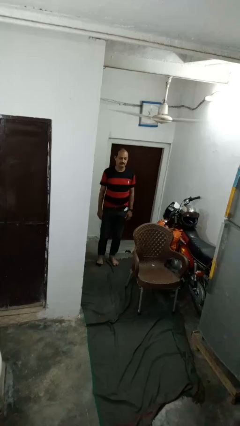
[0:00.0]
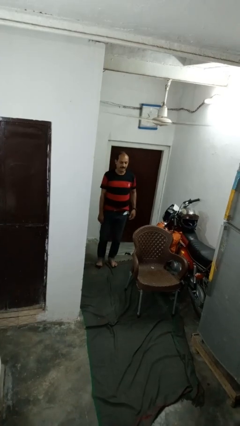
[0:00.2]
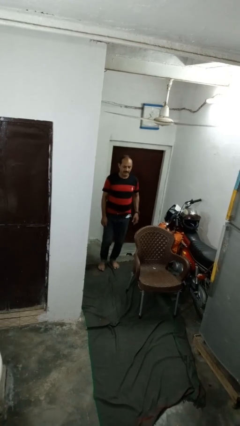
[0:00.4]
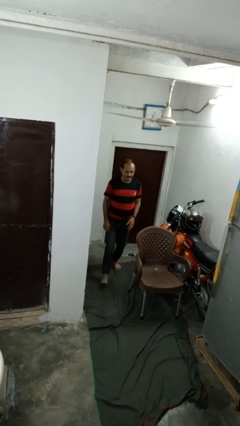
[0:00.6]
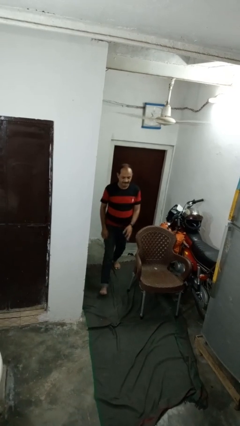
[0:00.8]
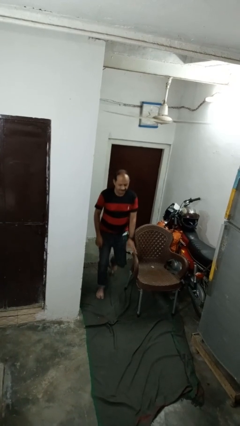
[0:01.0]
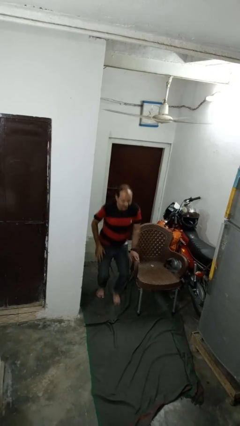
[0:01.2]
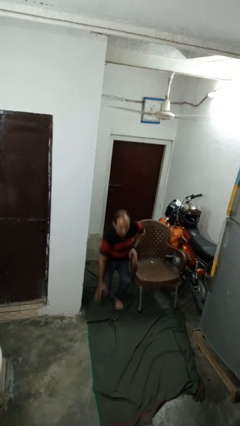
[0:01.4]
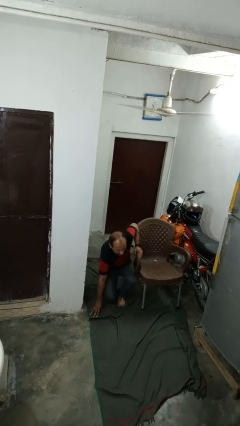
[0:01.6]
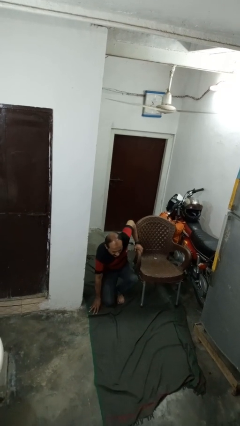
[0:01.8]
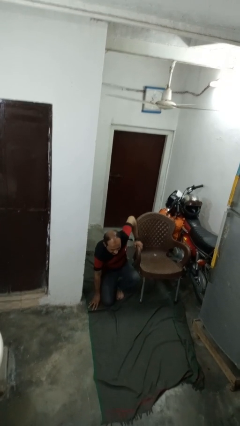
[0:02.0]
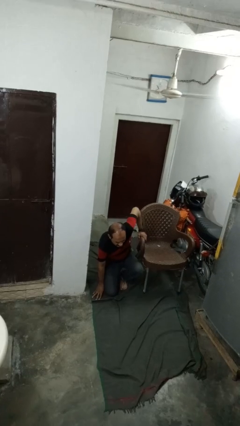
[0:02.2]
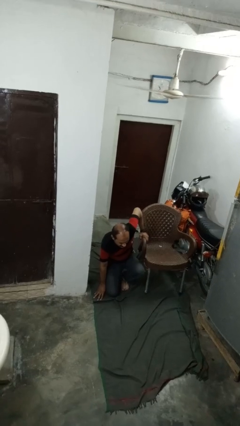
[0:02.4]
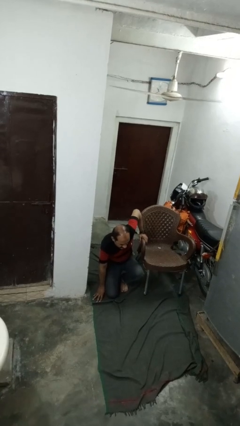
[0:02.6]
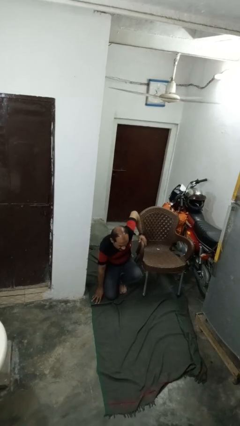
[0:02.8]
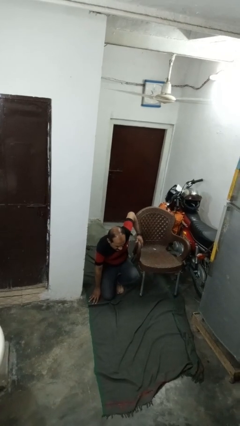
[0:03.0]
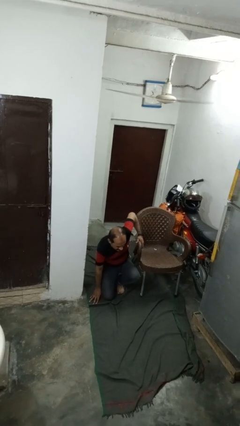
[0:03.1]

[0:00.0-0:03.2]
person trips on object on floor

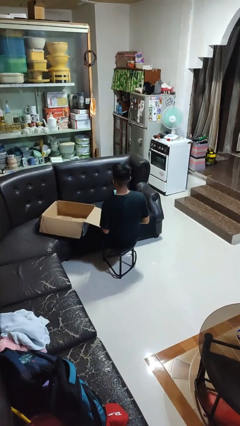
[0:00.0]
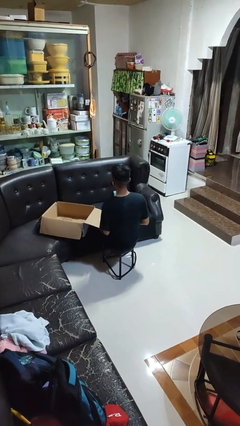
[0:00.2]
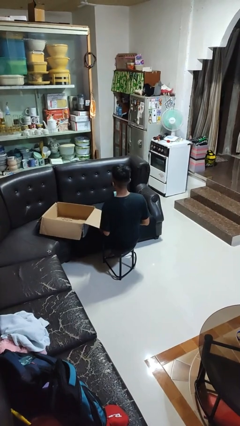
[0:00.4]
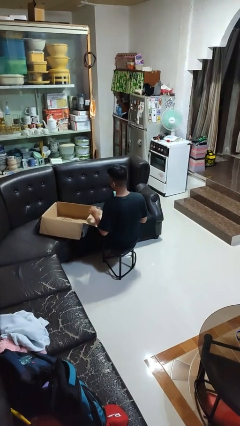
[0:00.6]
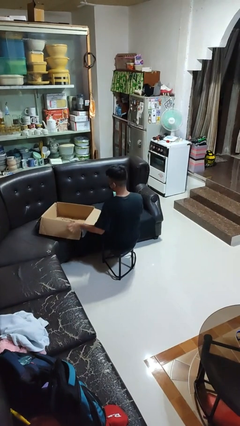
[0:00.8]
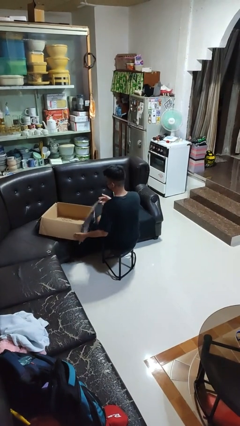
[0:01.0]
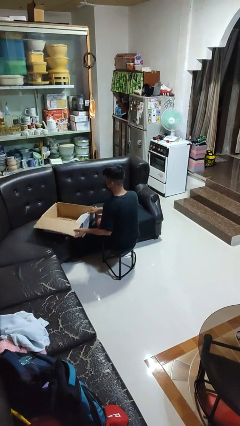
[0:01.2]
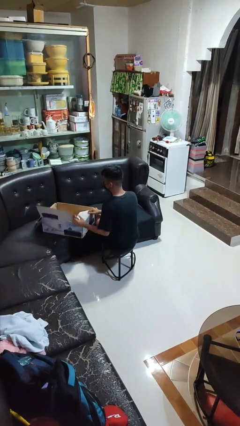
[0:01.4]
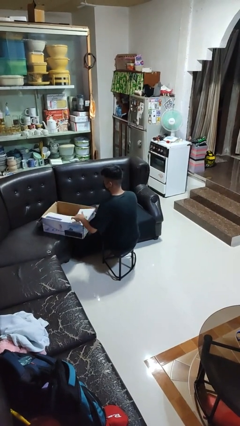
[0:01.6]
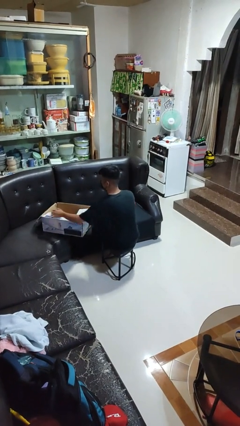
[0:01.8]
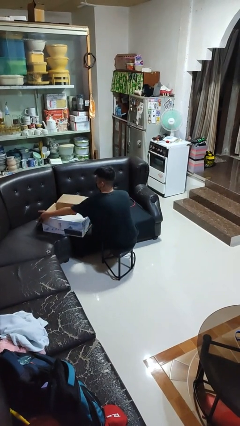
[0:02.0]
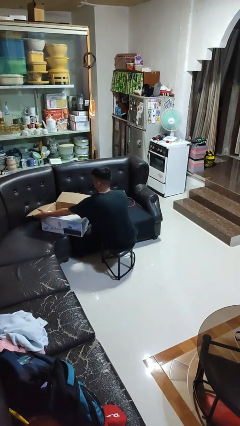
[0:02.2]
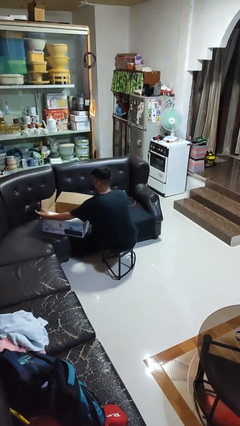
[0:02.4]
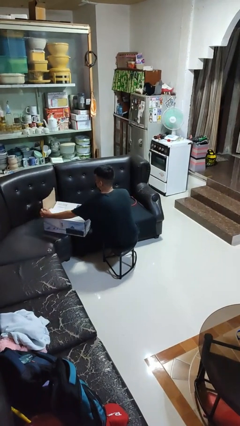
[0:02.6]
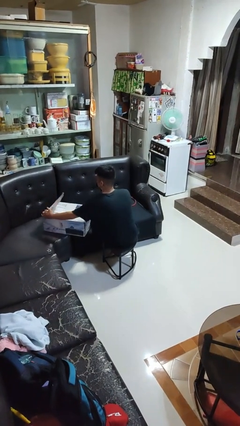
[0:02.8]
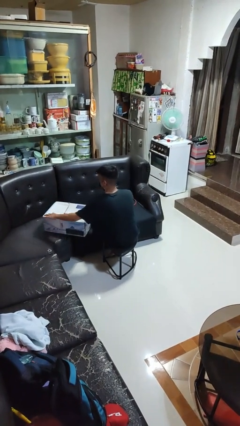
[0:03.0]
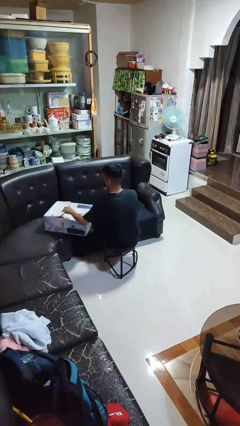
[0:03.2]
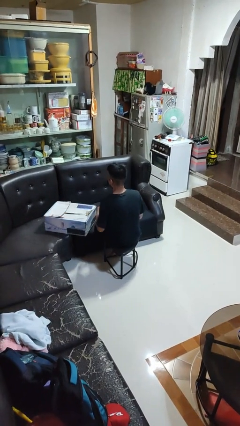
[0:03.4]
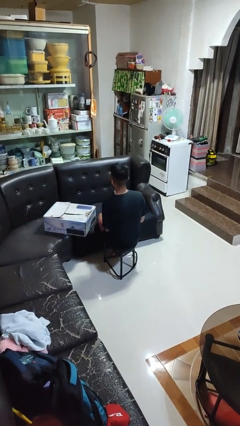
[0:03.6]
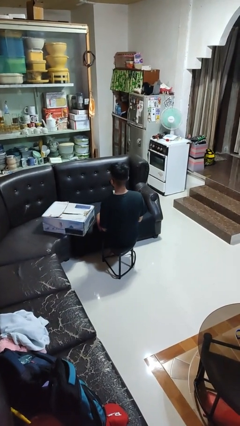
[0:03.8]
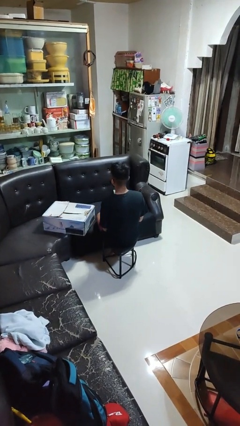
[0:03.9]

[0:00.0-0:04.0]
person closes box

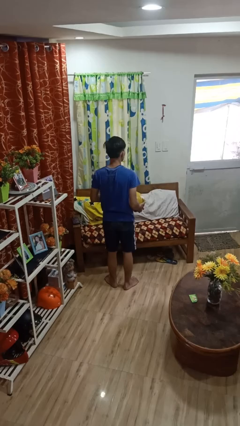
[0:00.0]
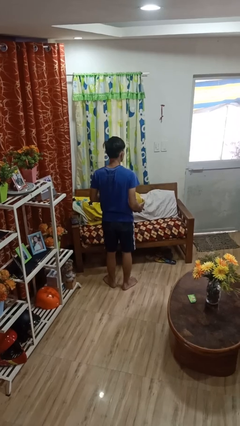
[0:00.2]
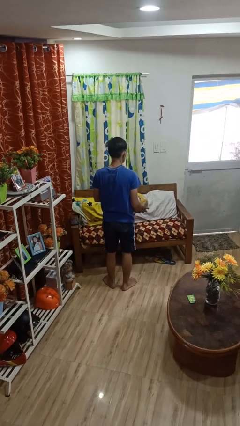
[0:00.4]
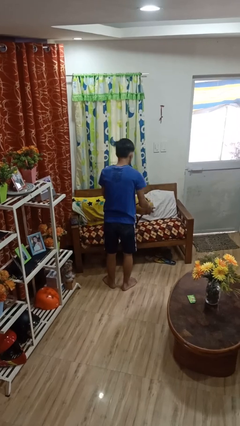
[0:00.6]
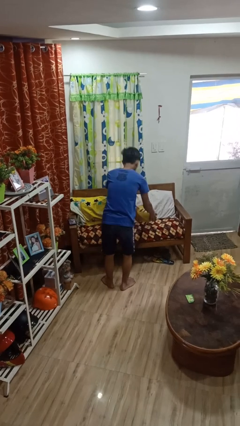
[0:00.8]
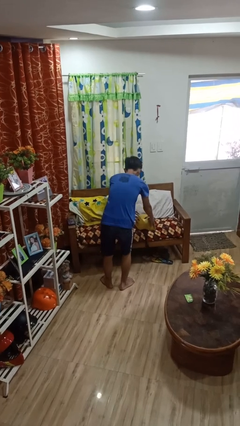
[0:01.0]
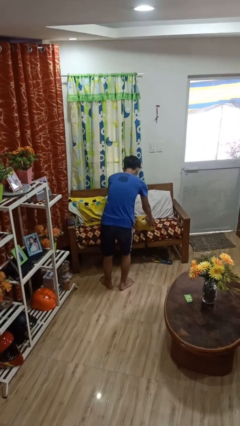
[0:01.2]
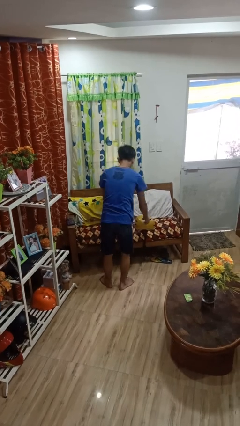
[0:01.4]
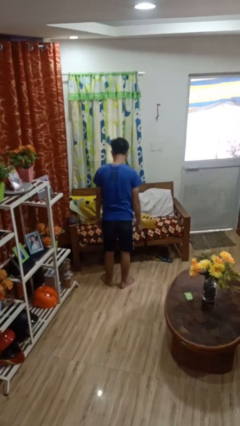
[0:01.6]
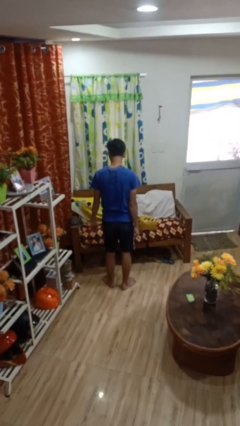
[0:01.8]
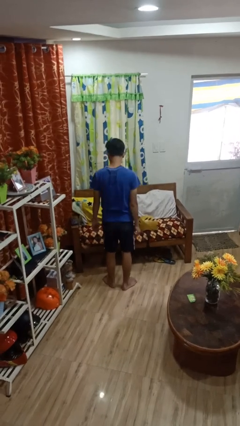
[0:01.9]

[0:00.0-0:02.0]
person puts down object on couch

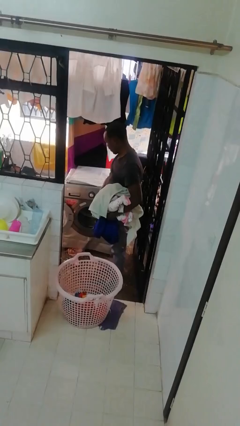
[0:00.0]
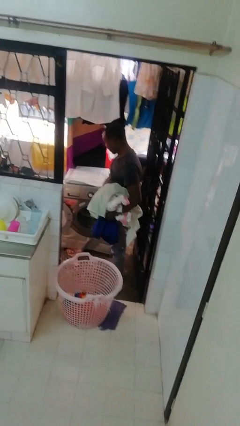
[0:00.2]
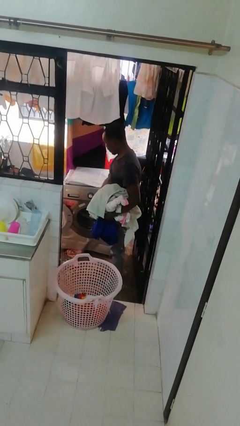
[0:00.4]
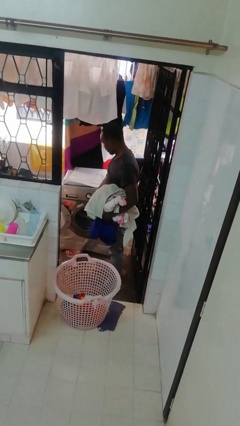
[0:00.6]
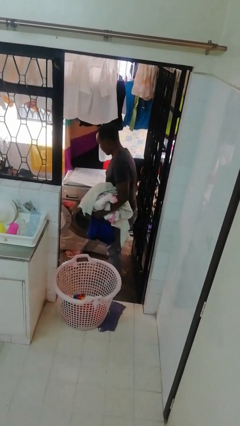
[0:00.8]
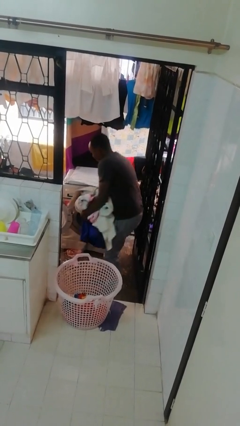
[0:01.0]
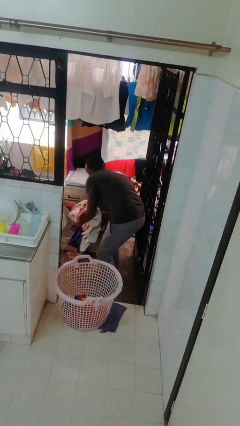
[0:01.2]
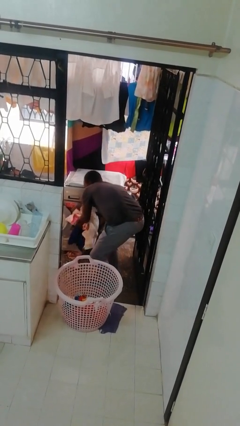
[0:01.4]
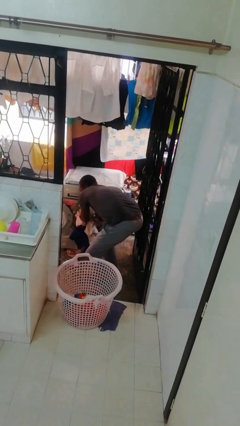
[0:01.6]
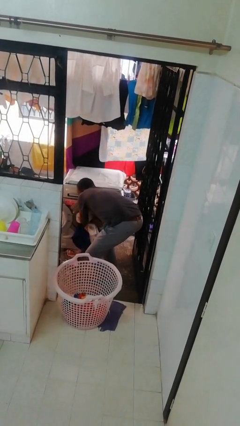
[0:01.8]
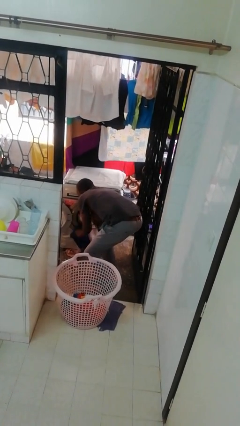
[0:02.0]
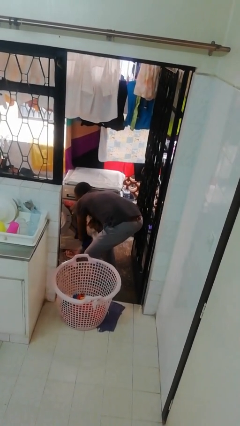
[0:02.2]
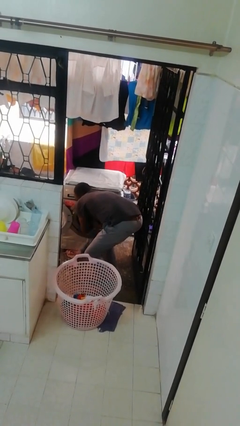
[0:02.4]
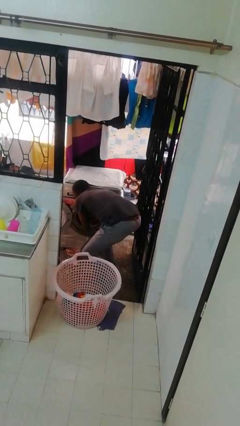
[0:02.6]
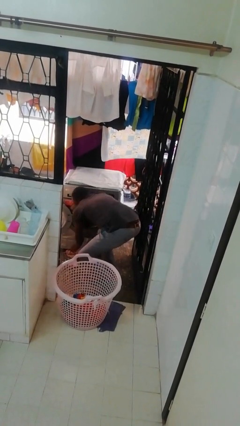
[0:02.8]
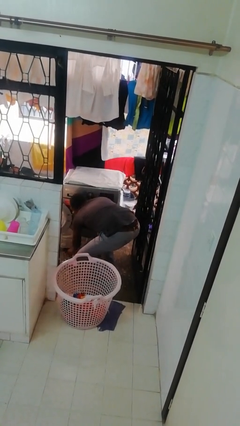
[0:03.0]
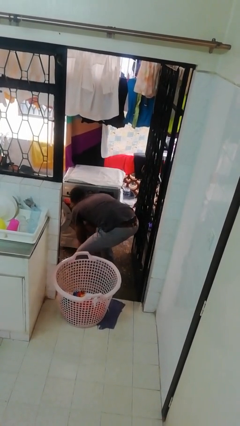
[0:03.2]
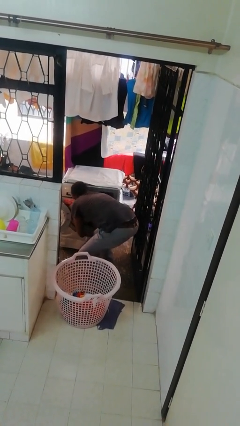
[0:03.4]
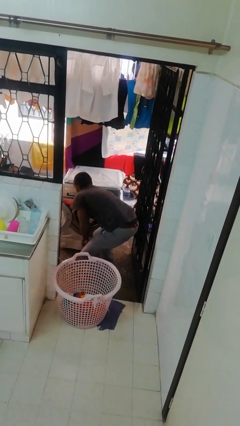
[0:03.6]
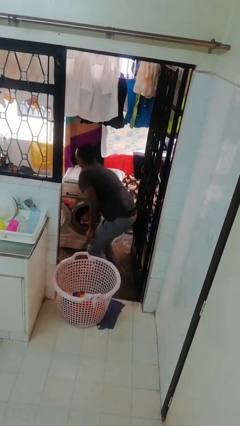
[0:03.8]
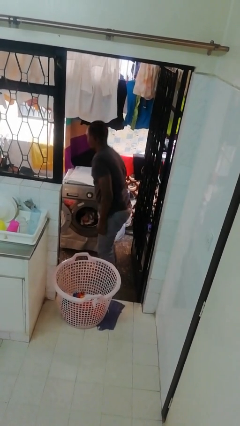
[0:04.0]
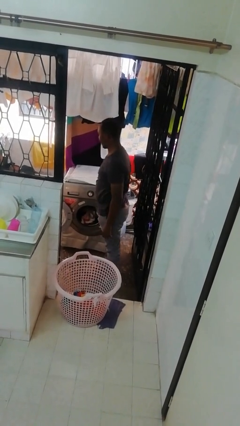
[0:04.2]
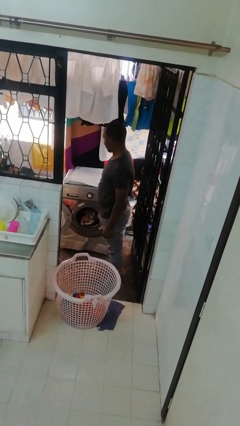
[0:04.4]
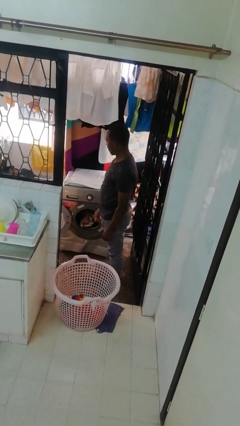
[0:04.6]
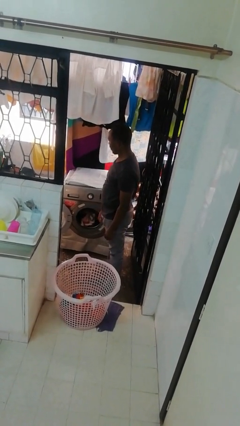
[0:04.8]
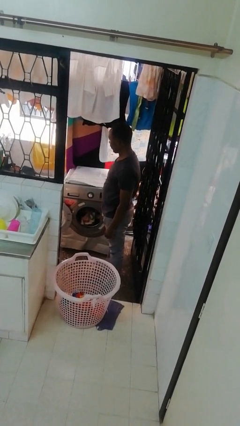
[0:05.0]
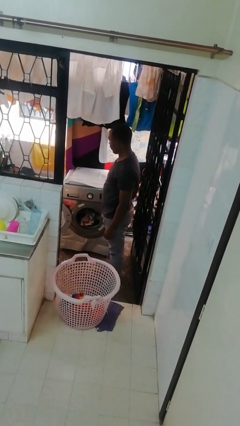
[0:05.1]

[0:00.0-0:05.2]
person loads clotheswasher

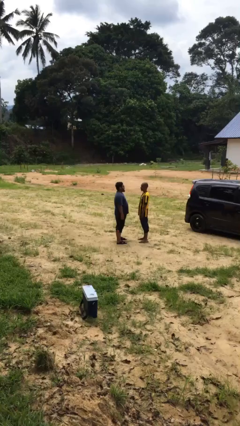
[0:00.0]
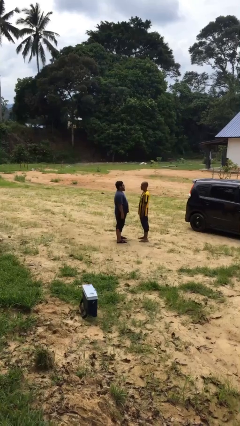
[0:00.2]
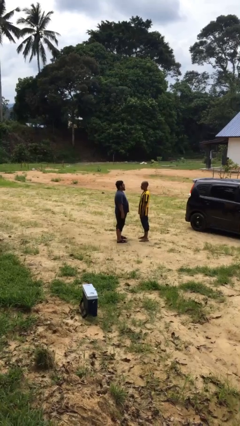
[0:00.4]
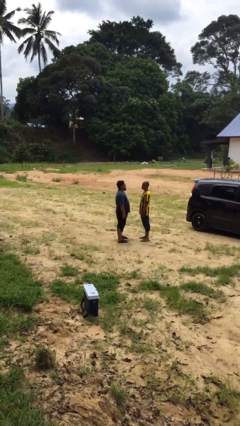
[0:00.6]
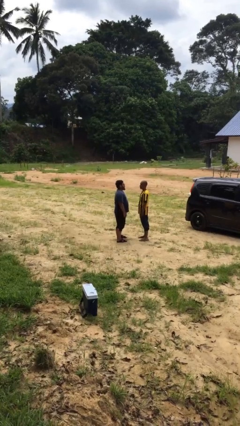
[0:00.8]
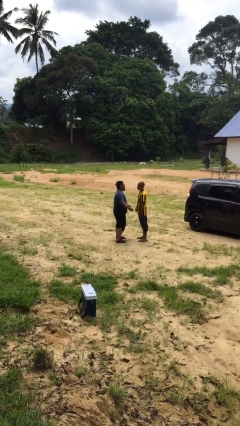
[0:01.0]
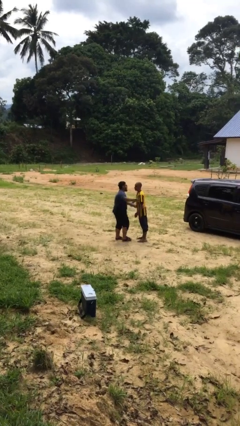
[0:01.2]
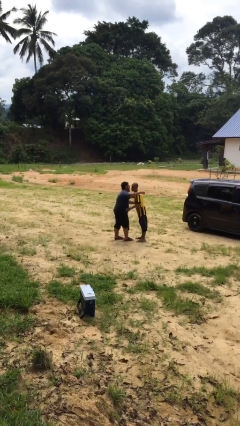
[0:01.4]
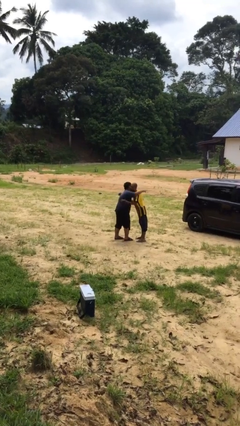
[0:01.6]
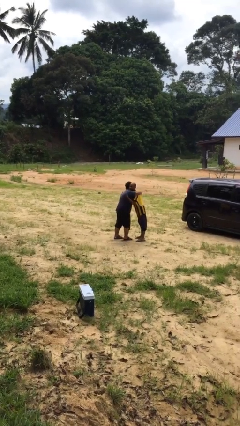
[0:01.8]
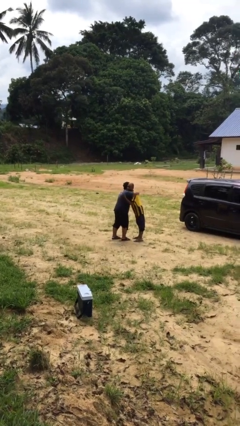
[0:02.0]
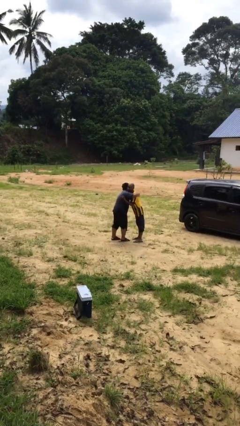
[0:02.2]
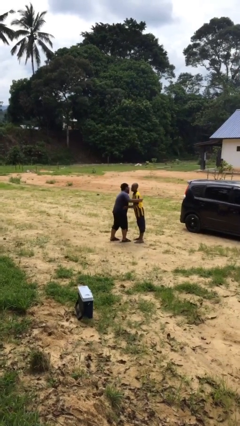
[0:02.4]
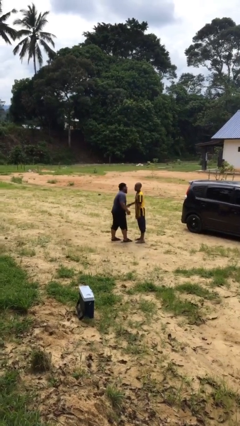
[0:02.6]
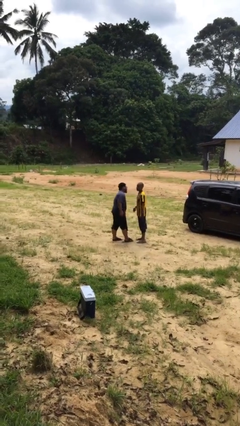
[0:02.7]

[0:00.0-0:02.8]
person embraces person

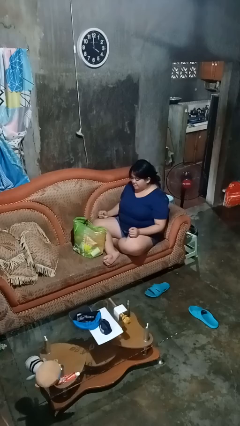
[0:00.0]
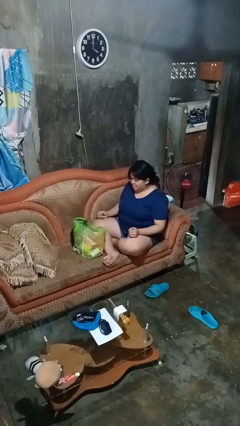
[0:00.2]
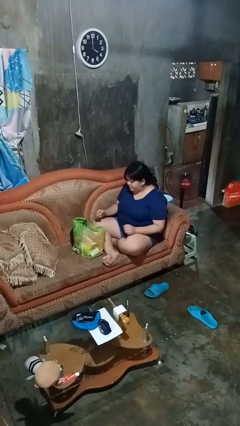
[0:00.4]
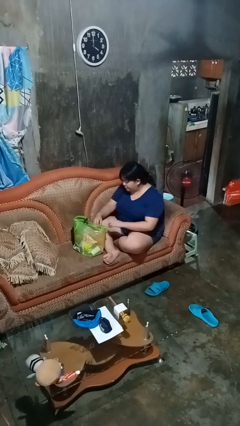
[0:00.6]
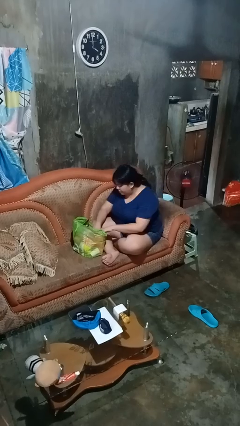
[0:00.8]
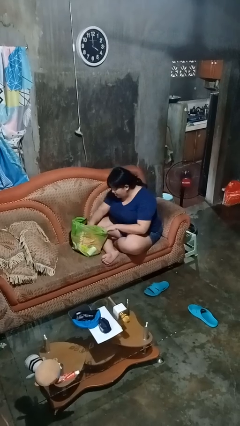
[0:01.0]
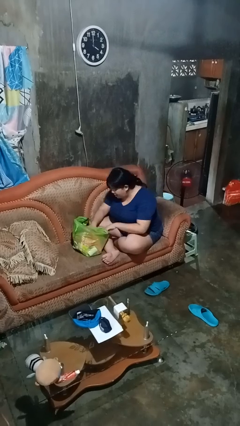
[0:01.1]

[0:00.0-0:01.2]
person searches in bag
